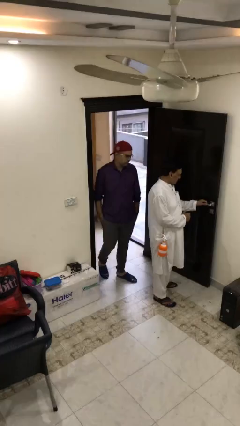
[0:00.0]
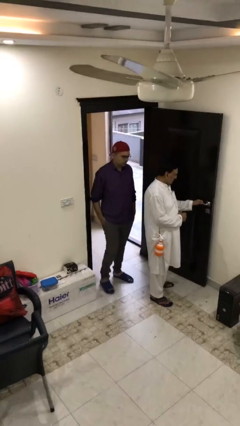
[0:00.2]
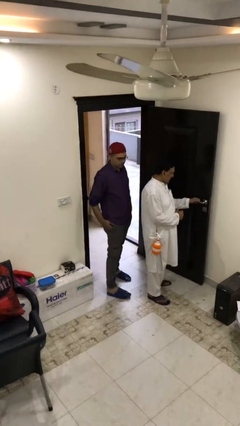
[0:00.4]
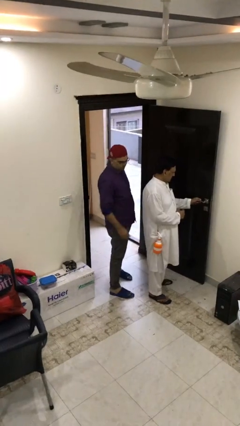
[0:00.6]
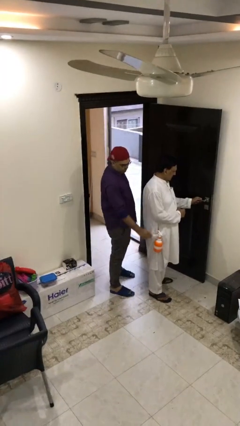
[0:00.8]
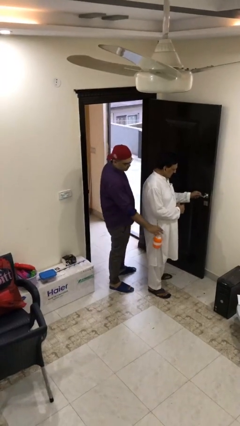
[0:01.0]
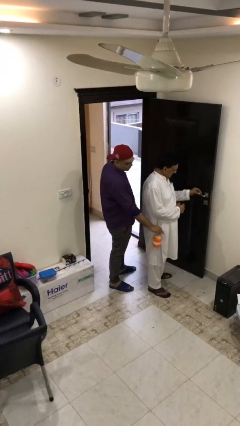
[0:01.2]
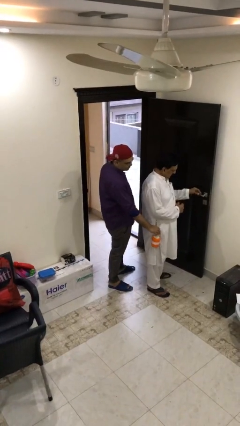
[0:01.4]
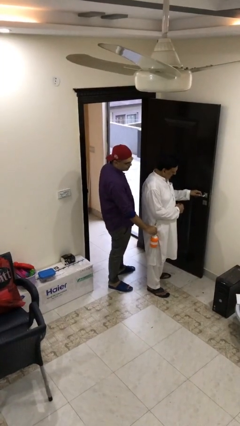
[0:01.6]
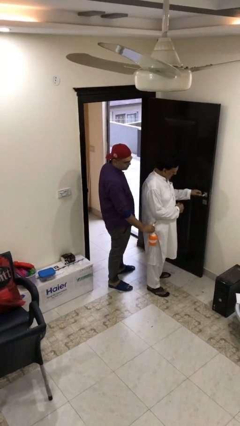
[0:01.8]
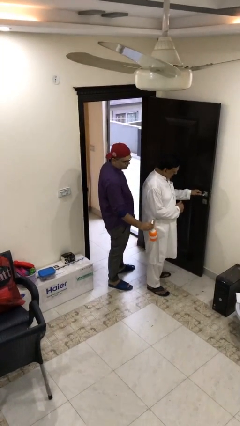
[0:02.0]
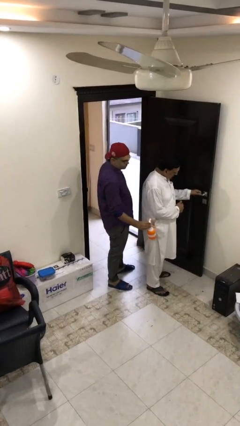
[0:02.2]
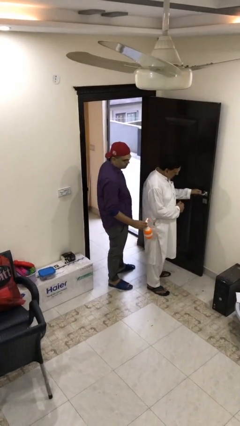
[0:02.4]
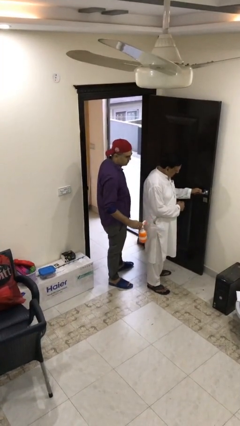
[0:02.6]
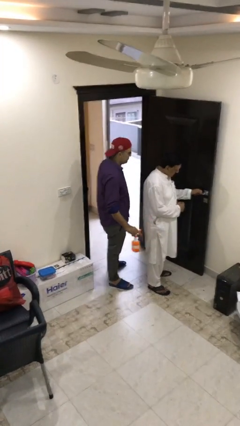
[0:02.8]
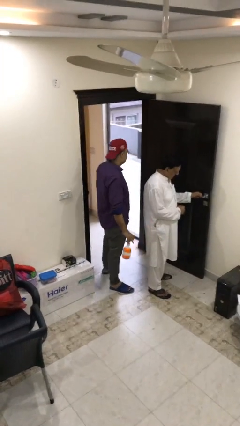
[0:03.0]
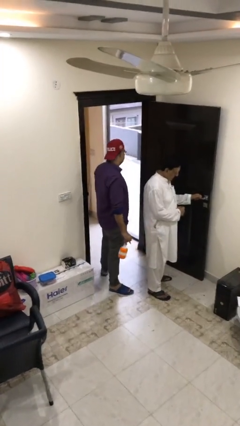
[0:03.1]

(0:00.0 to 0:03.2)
person steals object from person

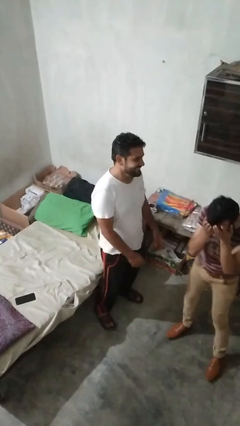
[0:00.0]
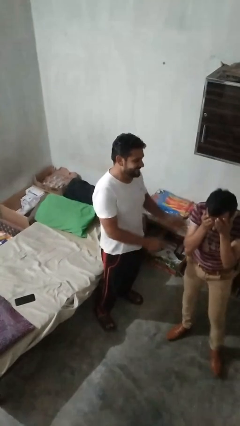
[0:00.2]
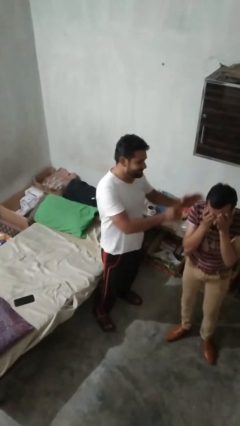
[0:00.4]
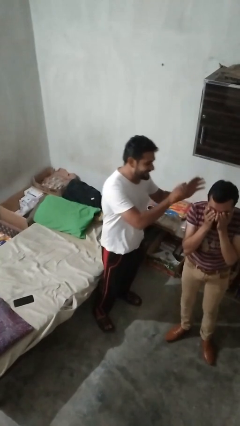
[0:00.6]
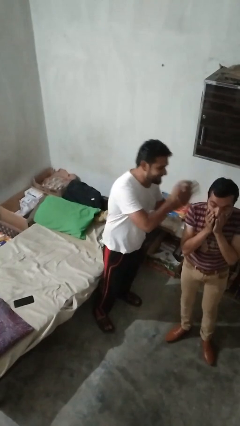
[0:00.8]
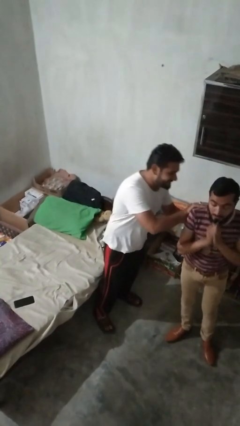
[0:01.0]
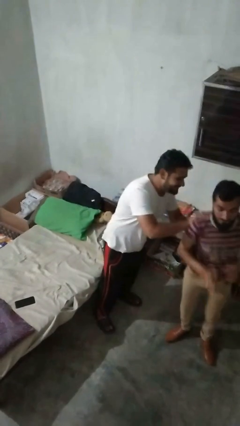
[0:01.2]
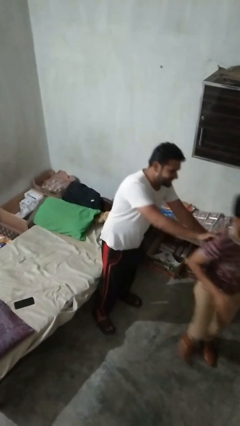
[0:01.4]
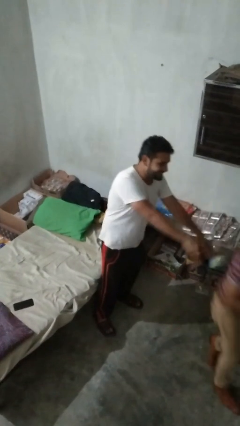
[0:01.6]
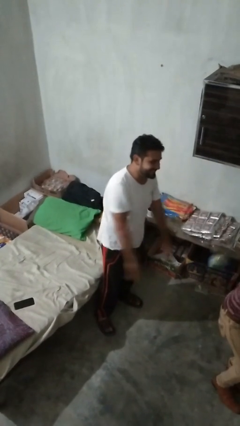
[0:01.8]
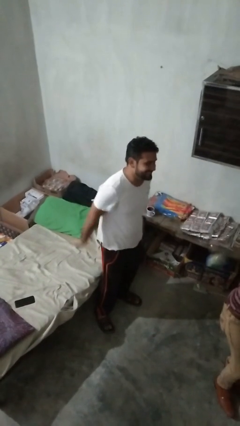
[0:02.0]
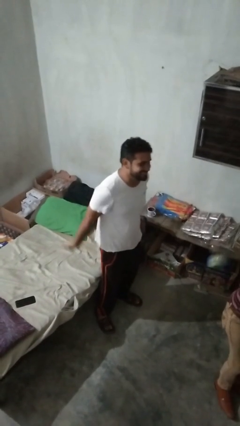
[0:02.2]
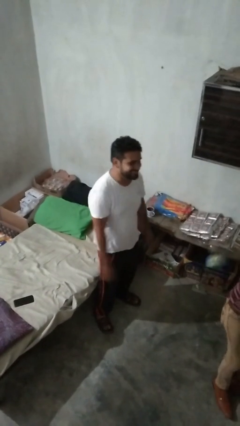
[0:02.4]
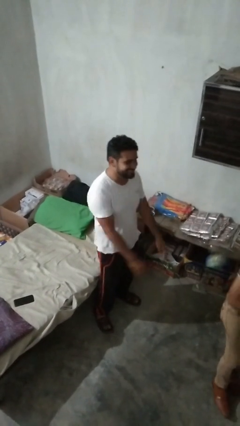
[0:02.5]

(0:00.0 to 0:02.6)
person shoves person

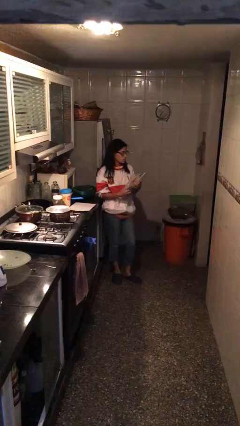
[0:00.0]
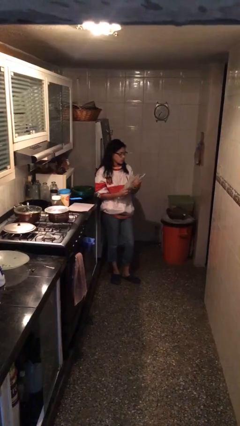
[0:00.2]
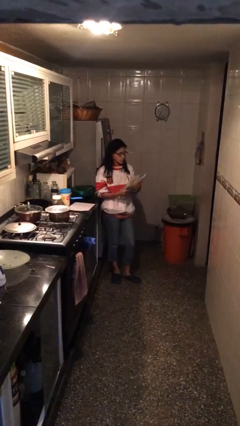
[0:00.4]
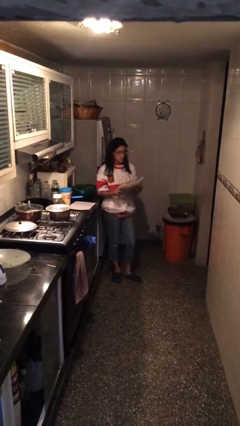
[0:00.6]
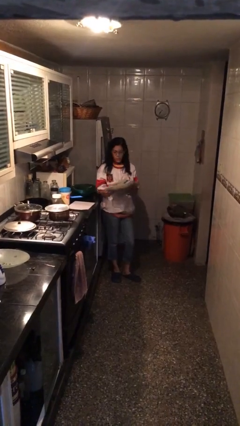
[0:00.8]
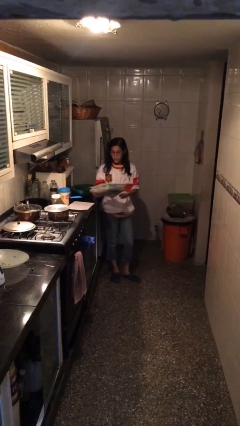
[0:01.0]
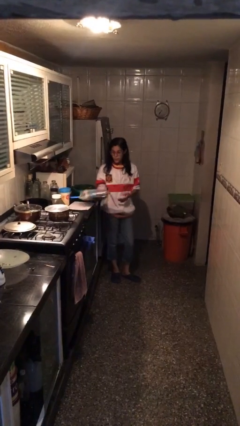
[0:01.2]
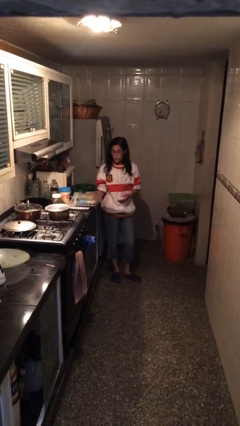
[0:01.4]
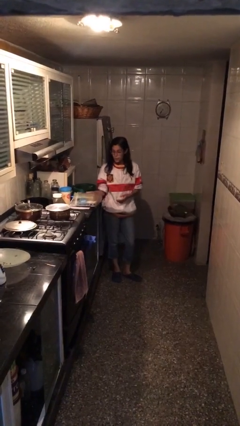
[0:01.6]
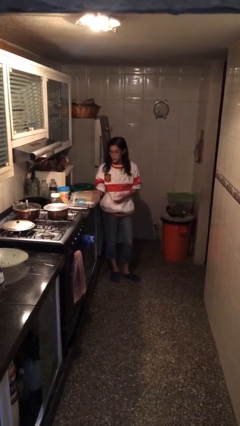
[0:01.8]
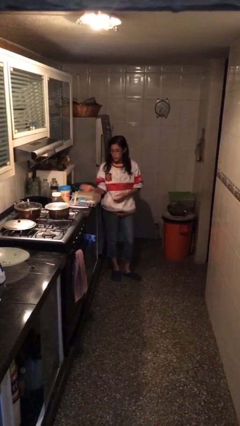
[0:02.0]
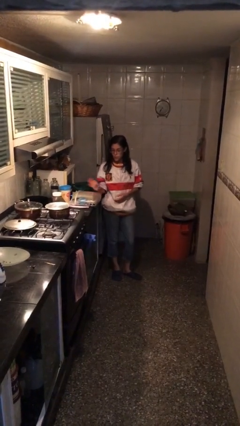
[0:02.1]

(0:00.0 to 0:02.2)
person puts down object on table

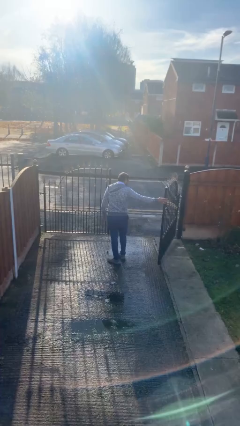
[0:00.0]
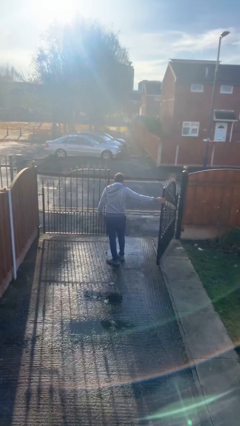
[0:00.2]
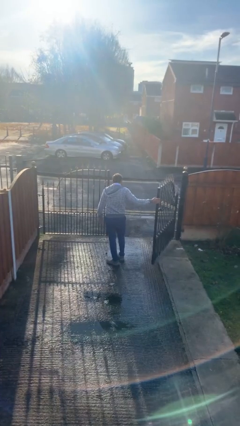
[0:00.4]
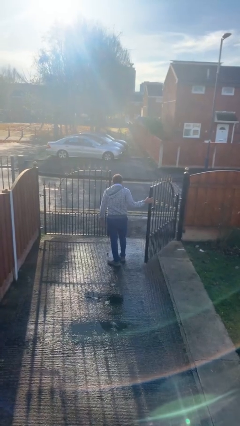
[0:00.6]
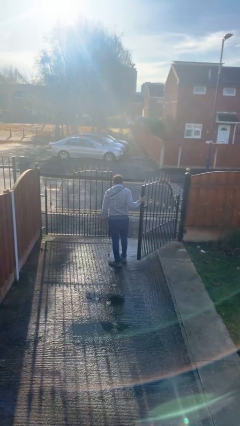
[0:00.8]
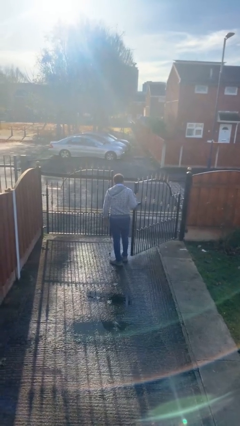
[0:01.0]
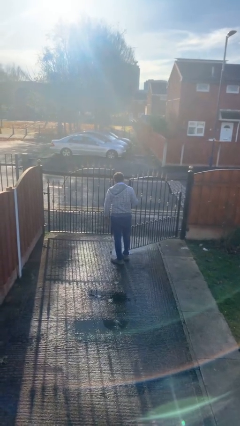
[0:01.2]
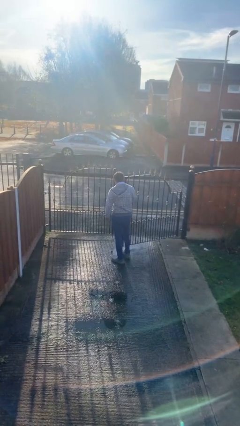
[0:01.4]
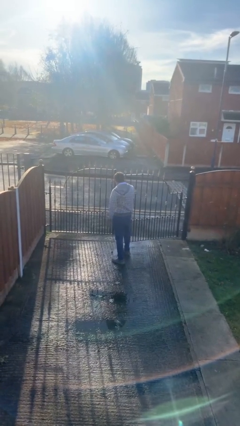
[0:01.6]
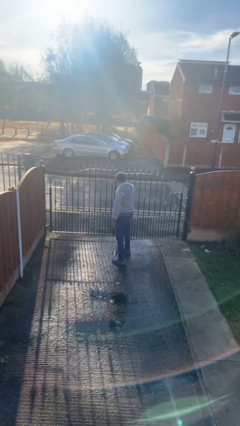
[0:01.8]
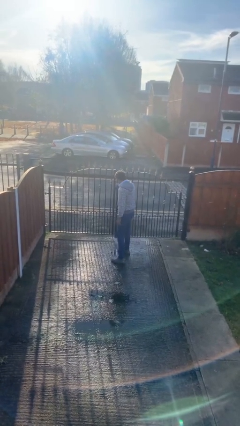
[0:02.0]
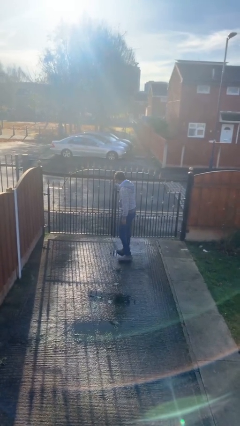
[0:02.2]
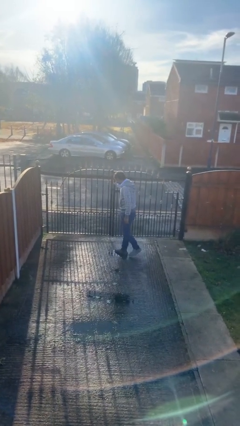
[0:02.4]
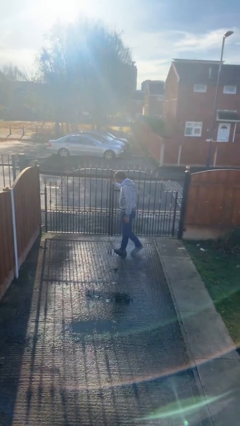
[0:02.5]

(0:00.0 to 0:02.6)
person closes facility door

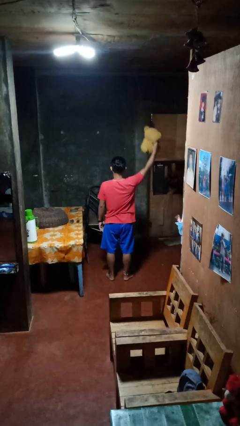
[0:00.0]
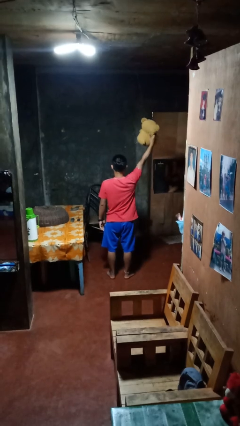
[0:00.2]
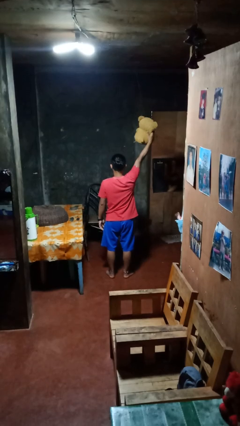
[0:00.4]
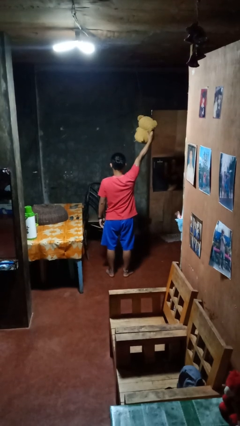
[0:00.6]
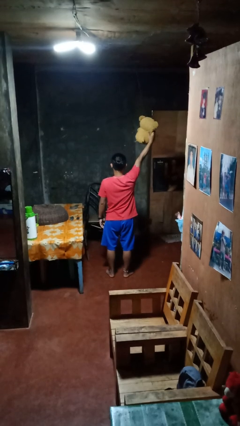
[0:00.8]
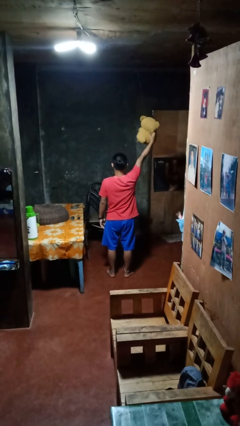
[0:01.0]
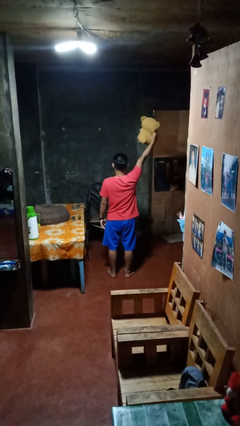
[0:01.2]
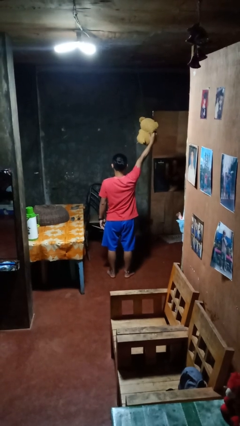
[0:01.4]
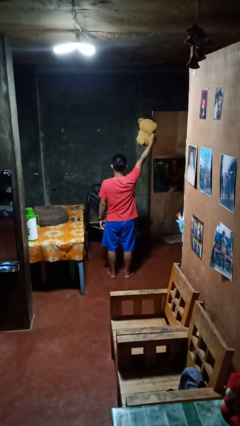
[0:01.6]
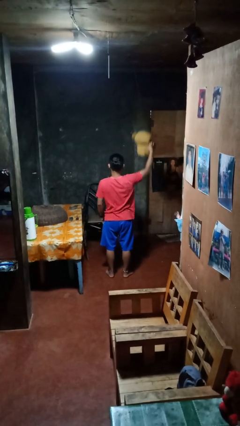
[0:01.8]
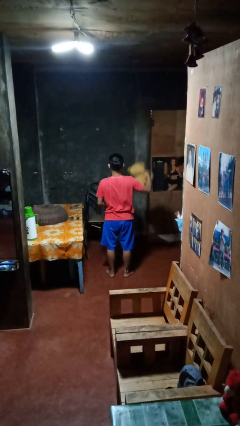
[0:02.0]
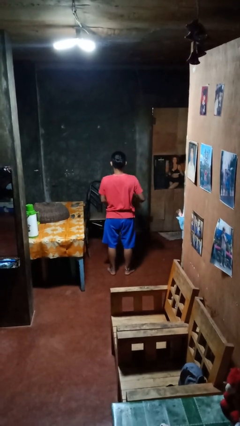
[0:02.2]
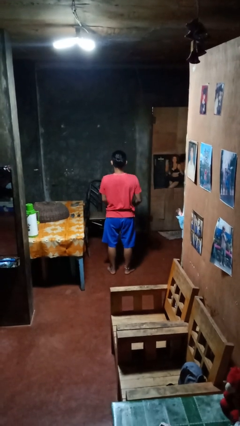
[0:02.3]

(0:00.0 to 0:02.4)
person holds object above head

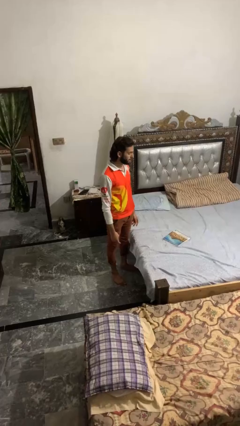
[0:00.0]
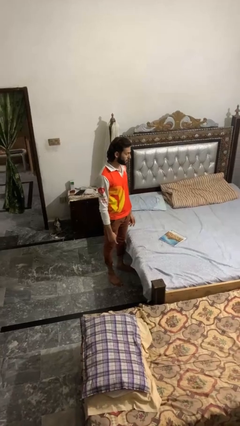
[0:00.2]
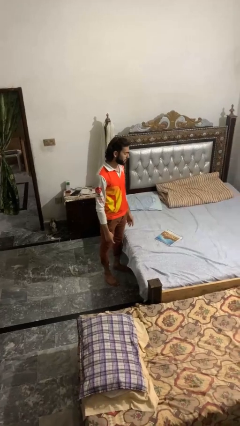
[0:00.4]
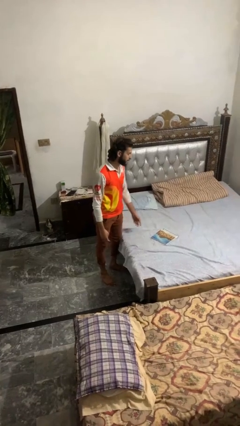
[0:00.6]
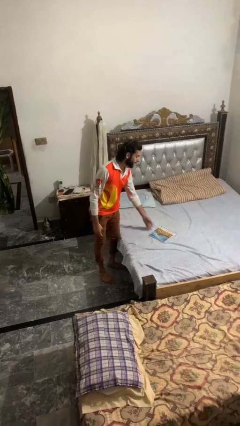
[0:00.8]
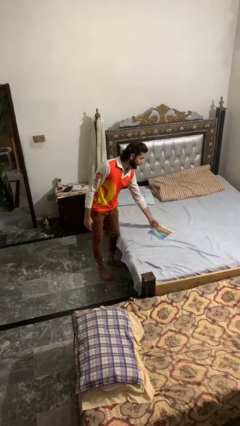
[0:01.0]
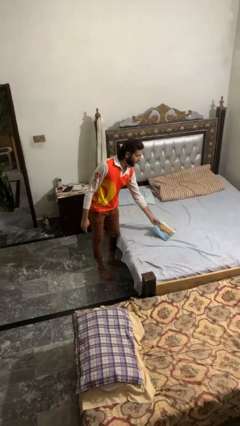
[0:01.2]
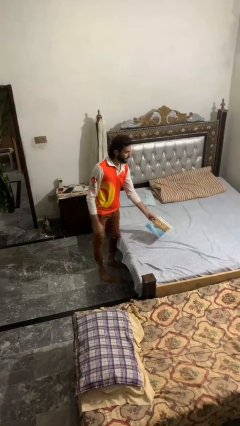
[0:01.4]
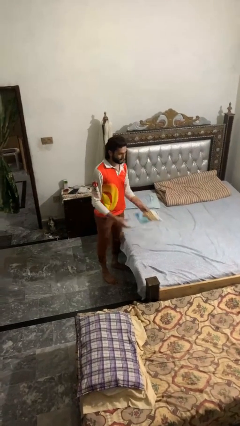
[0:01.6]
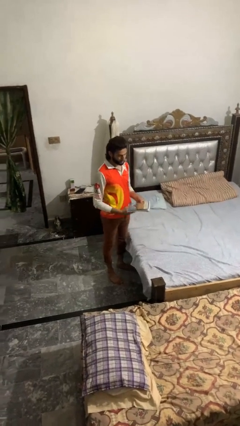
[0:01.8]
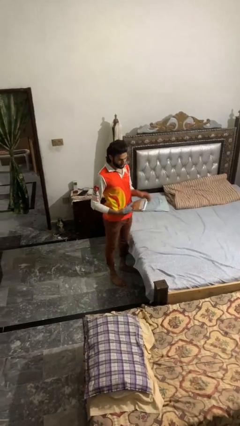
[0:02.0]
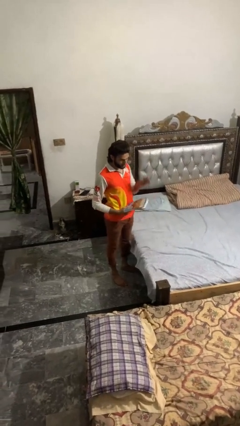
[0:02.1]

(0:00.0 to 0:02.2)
person picks up object from bed

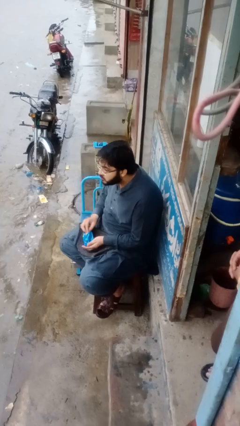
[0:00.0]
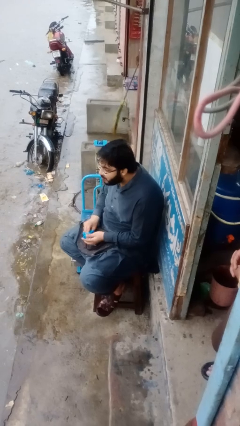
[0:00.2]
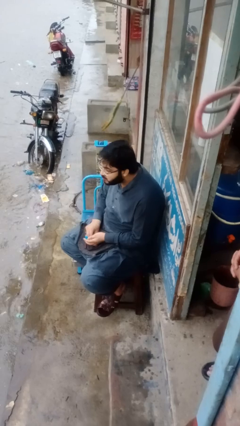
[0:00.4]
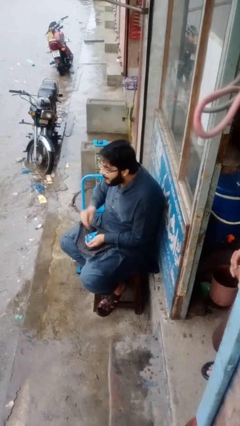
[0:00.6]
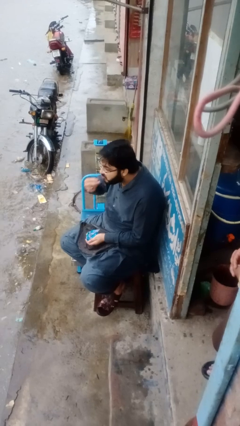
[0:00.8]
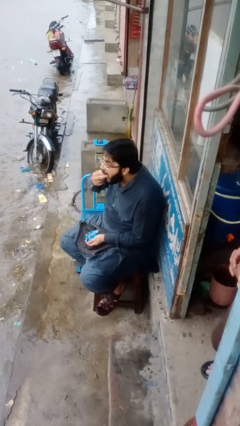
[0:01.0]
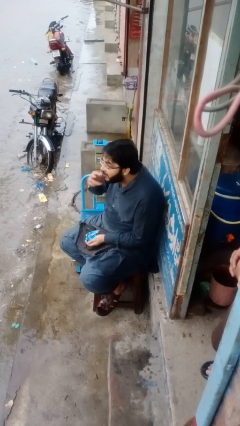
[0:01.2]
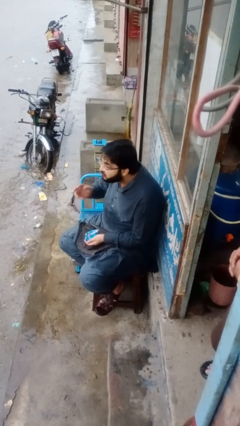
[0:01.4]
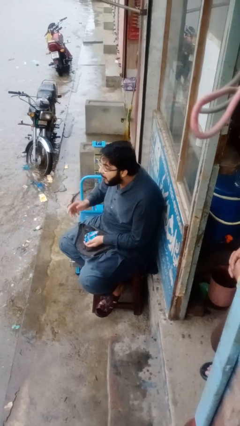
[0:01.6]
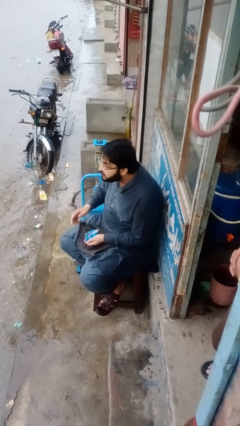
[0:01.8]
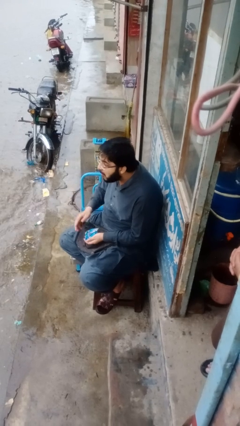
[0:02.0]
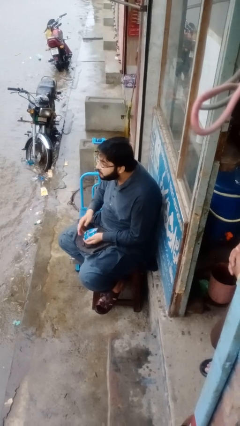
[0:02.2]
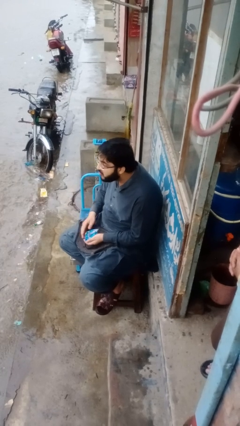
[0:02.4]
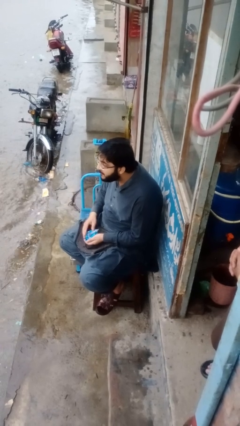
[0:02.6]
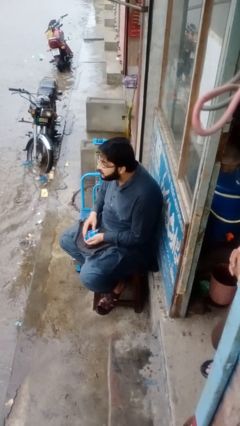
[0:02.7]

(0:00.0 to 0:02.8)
person eats snack from bag
